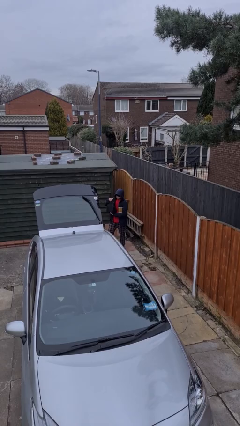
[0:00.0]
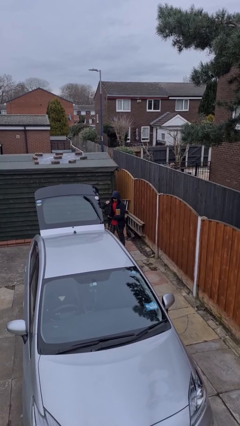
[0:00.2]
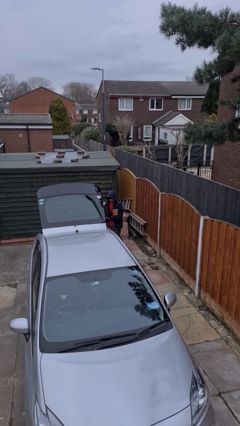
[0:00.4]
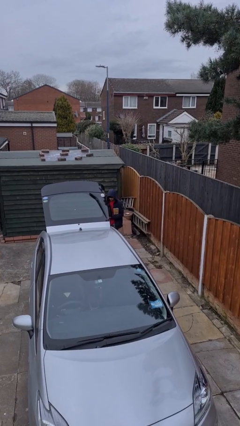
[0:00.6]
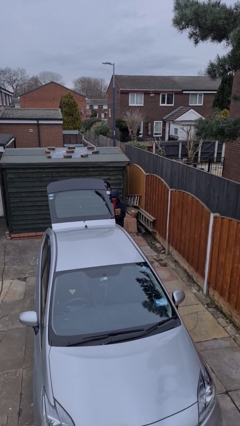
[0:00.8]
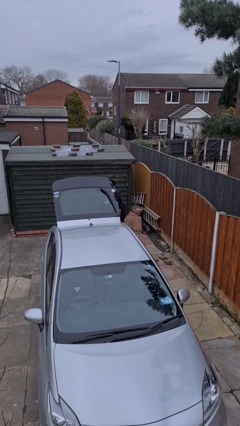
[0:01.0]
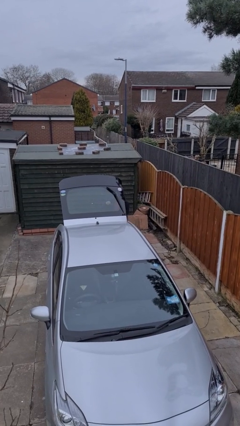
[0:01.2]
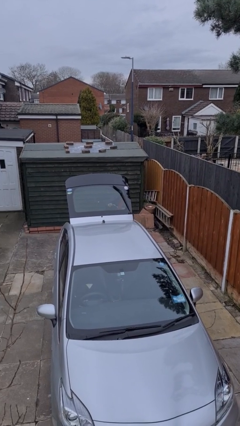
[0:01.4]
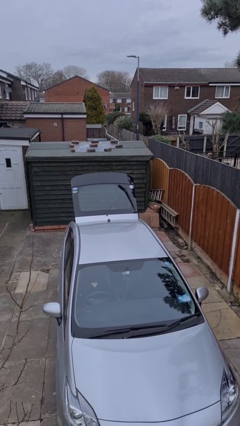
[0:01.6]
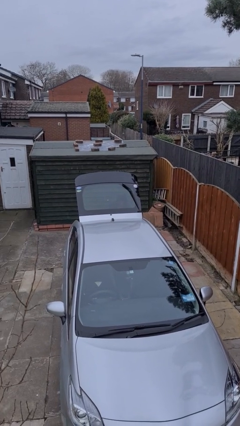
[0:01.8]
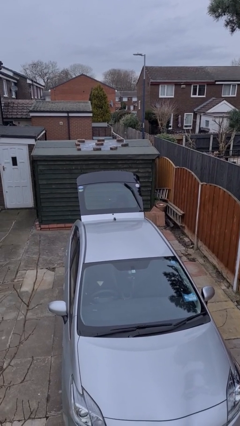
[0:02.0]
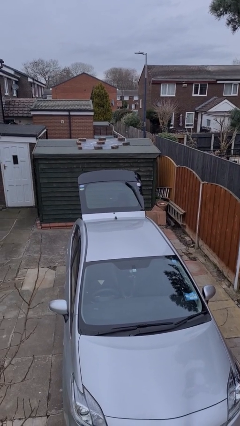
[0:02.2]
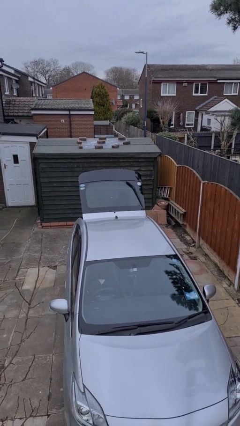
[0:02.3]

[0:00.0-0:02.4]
person loads car

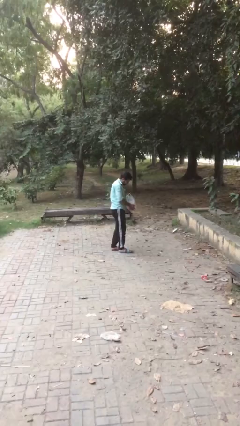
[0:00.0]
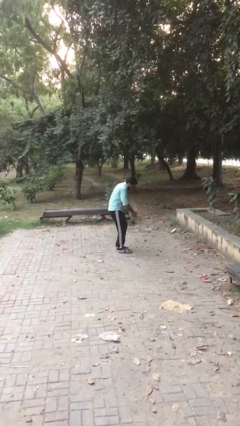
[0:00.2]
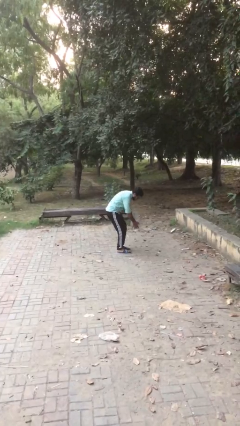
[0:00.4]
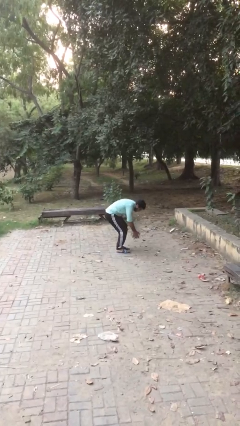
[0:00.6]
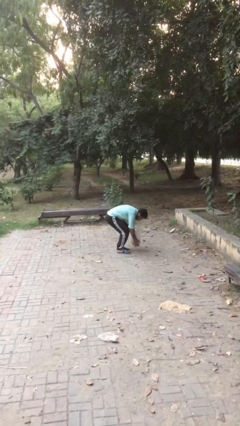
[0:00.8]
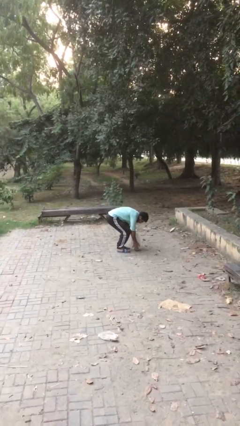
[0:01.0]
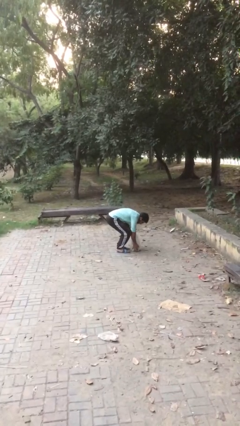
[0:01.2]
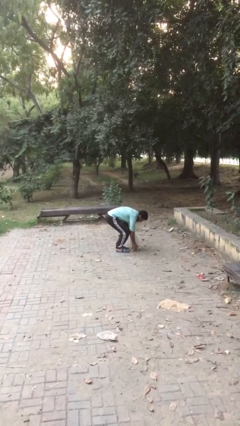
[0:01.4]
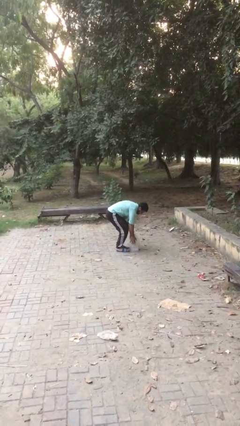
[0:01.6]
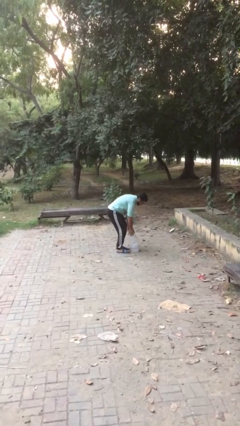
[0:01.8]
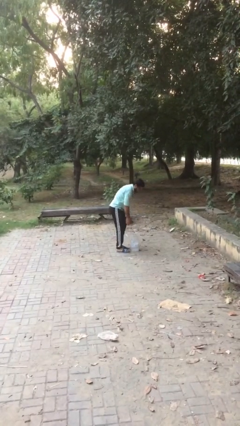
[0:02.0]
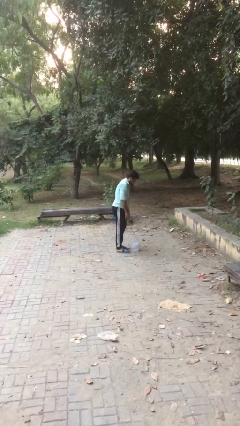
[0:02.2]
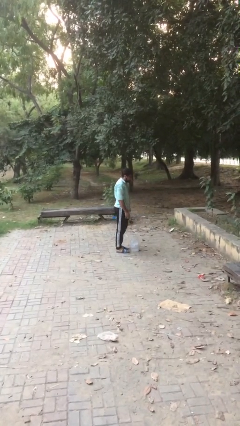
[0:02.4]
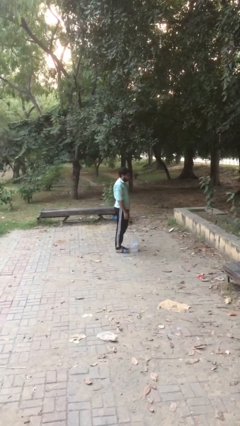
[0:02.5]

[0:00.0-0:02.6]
person puts down object on floor

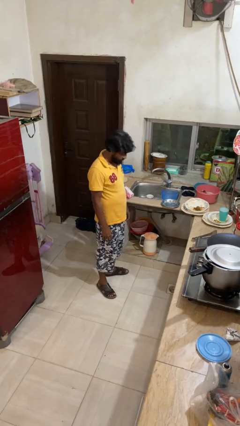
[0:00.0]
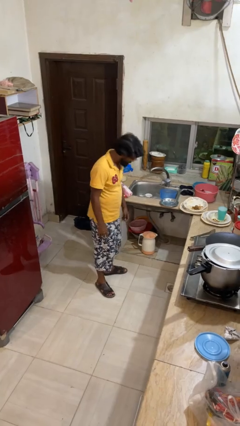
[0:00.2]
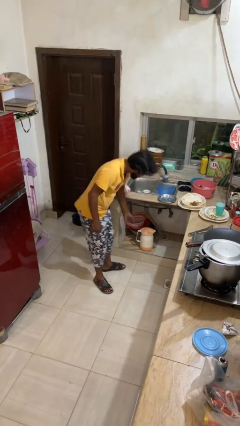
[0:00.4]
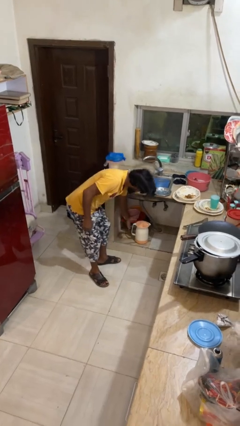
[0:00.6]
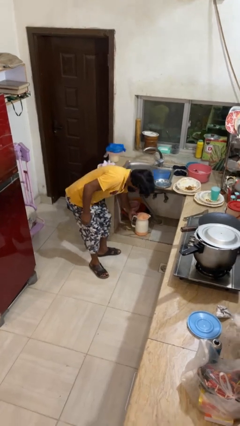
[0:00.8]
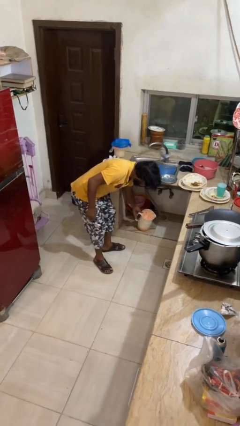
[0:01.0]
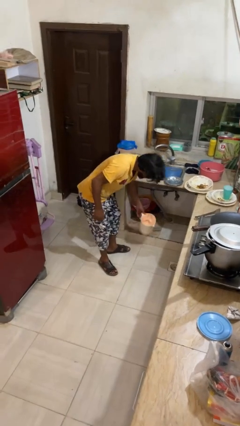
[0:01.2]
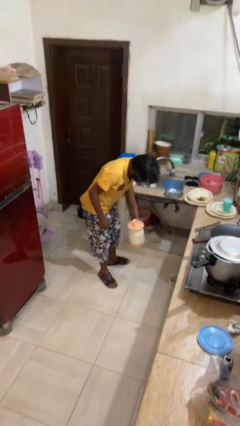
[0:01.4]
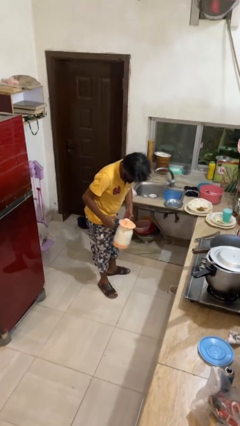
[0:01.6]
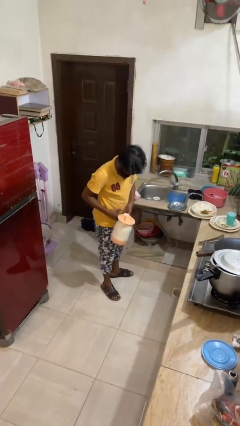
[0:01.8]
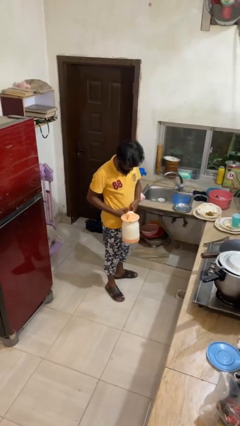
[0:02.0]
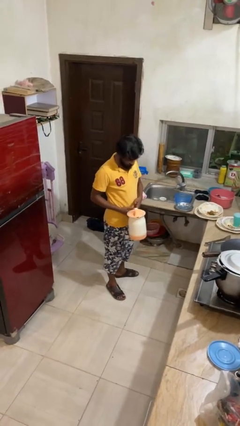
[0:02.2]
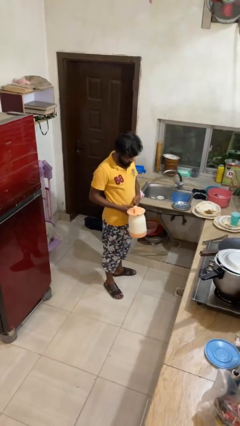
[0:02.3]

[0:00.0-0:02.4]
person picks up object from cabinet

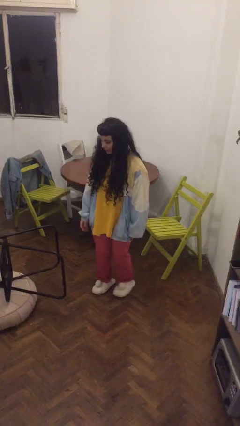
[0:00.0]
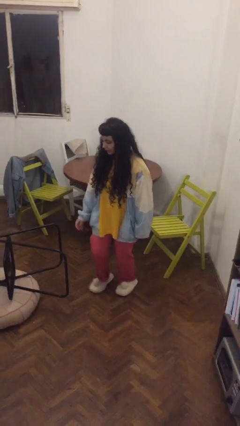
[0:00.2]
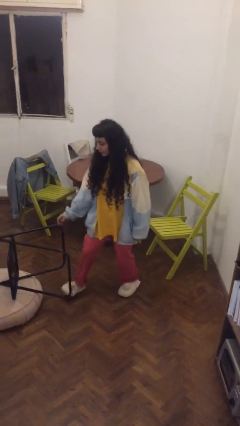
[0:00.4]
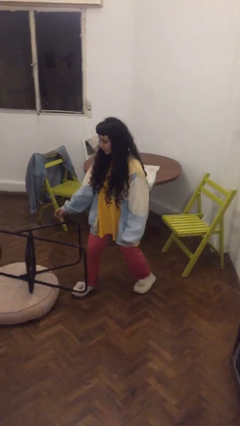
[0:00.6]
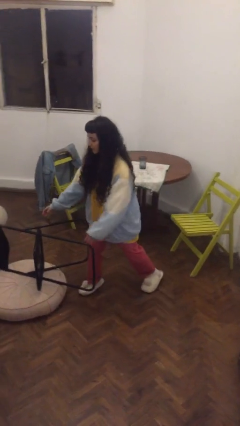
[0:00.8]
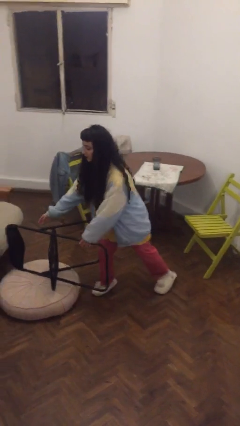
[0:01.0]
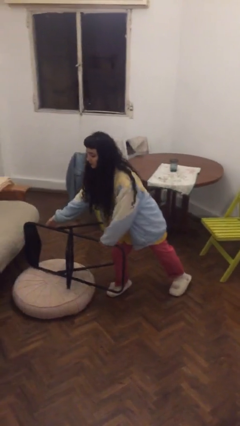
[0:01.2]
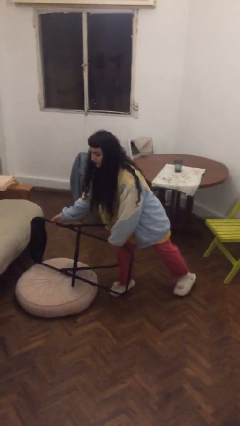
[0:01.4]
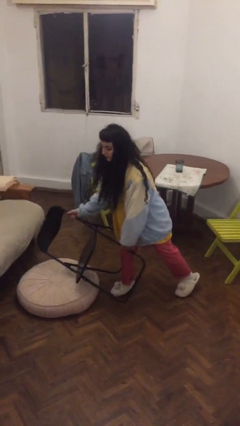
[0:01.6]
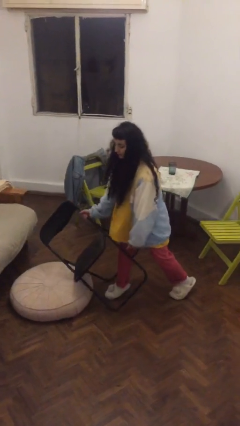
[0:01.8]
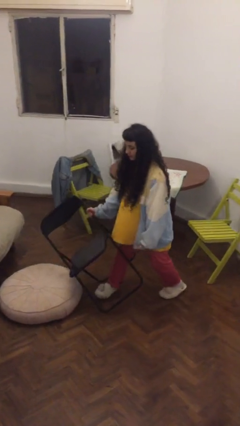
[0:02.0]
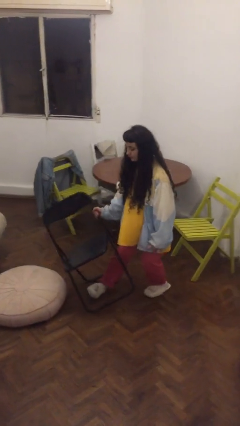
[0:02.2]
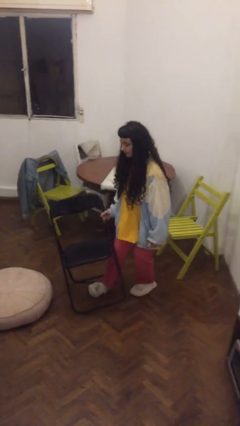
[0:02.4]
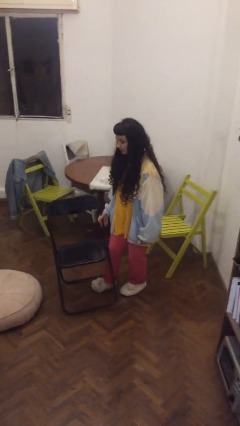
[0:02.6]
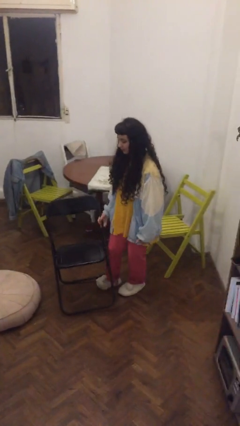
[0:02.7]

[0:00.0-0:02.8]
person sets upright furniture

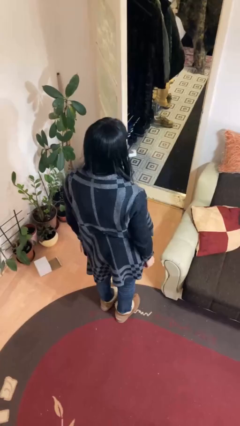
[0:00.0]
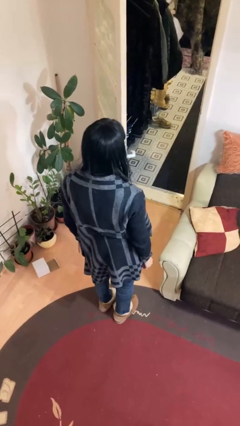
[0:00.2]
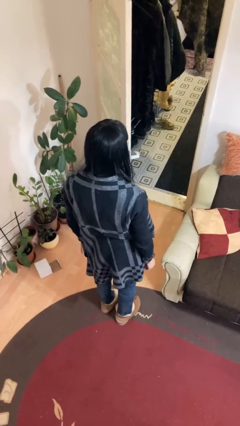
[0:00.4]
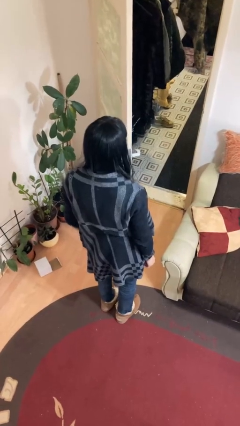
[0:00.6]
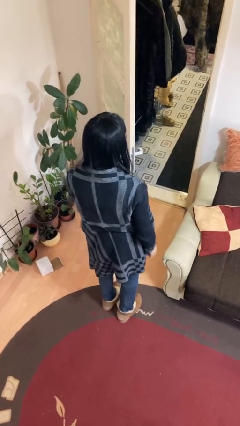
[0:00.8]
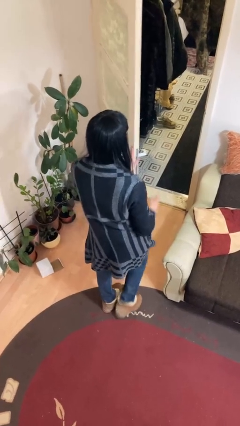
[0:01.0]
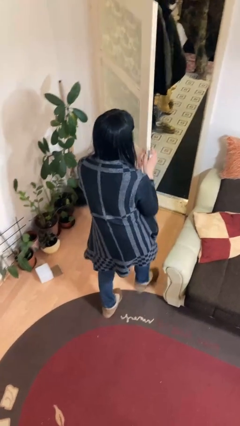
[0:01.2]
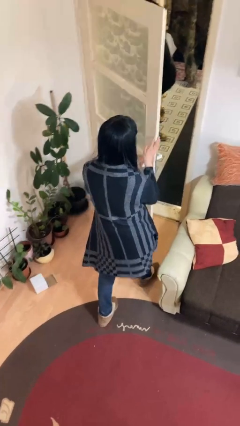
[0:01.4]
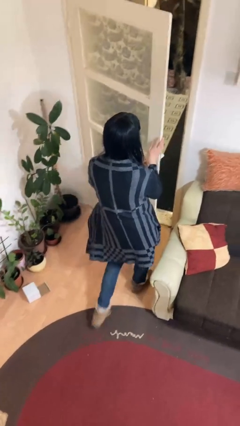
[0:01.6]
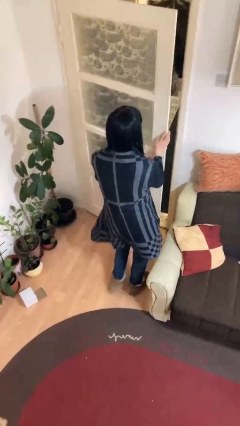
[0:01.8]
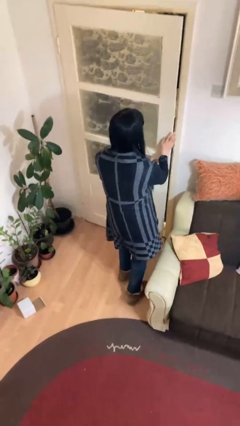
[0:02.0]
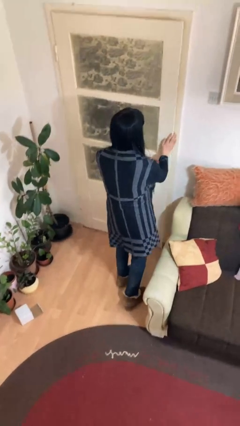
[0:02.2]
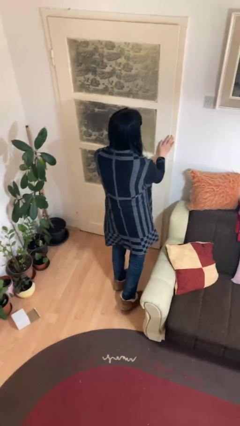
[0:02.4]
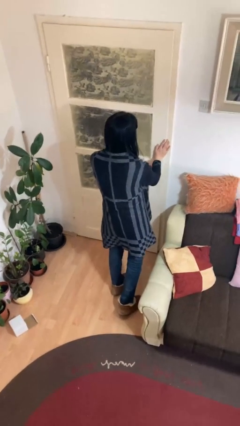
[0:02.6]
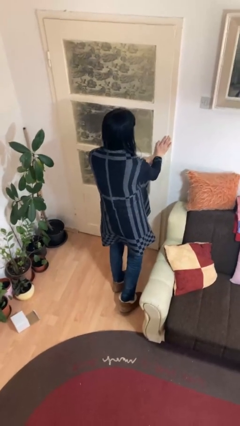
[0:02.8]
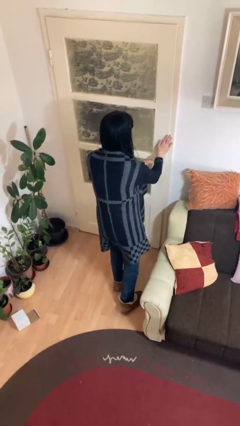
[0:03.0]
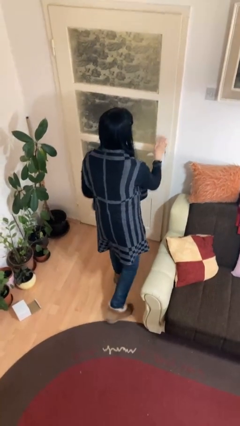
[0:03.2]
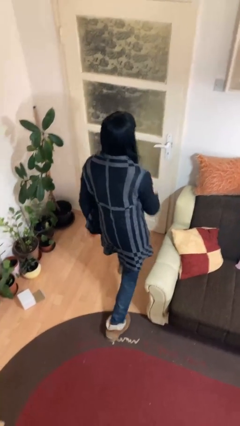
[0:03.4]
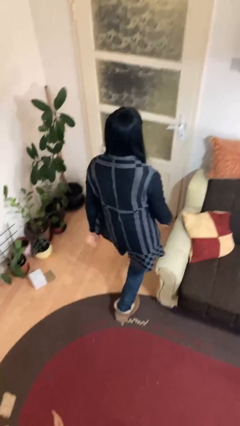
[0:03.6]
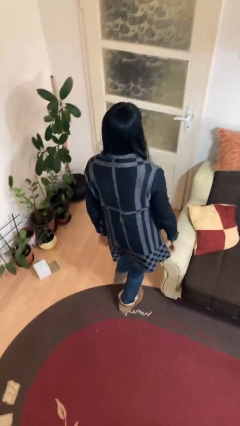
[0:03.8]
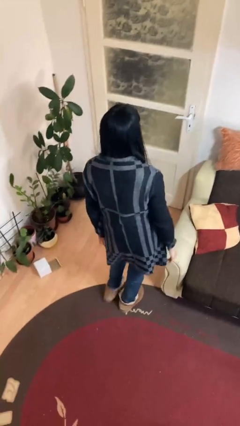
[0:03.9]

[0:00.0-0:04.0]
person closes facility door

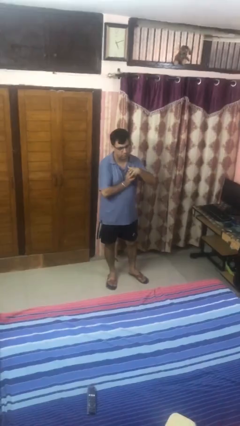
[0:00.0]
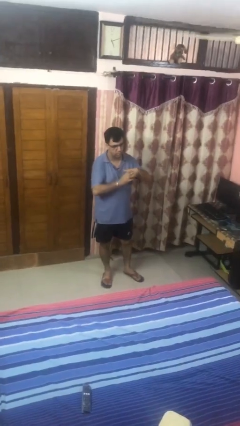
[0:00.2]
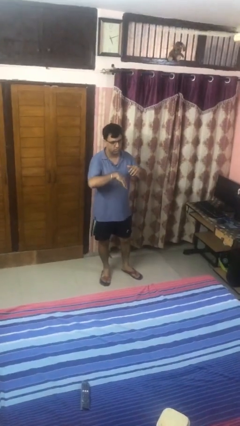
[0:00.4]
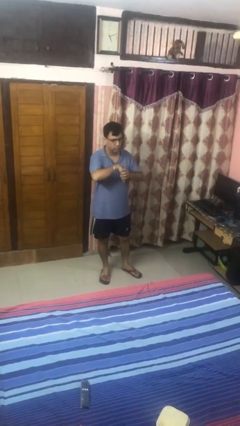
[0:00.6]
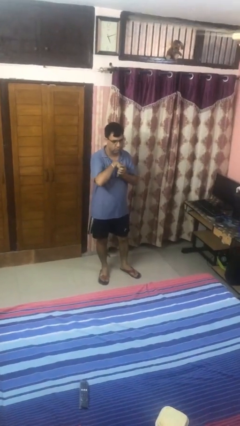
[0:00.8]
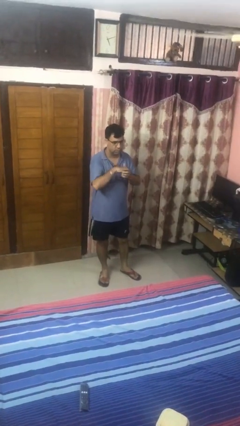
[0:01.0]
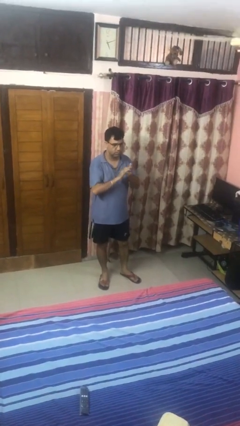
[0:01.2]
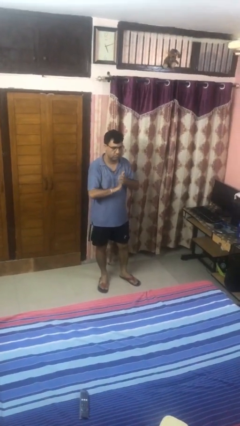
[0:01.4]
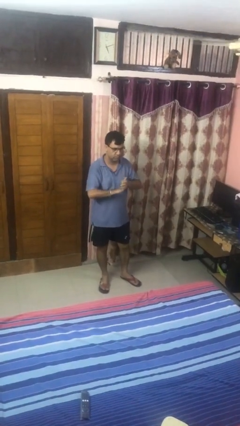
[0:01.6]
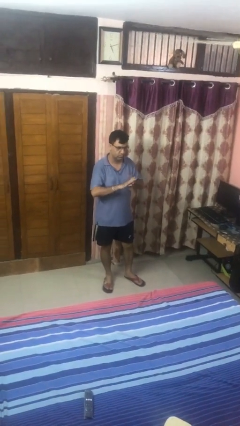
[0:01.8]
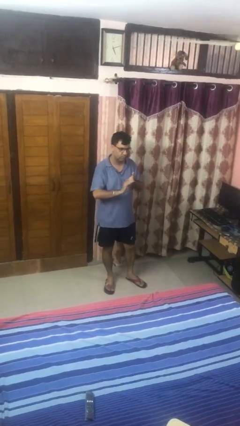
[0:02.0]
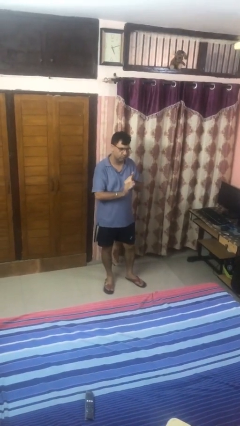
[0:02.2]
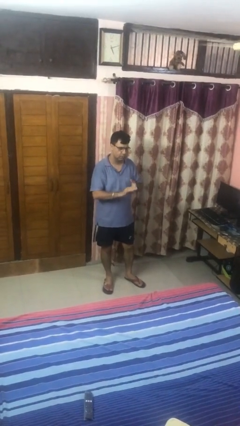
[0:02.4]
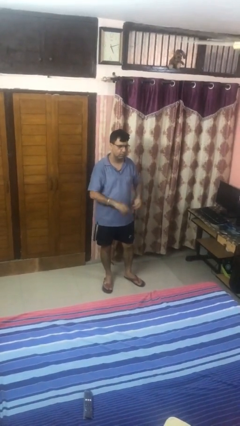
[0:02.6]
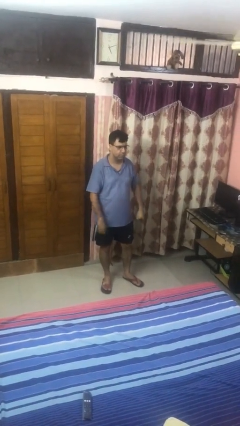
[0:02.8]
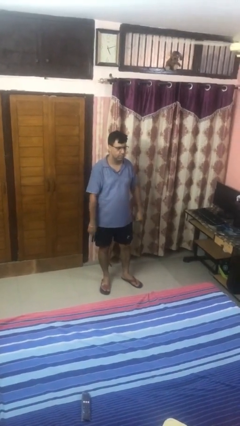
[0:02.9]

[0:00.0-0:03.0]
person cracks knuckles

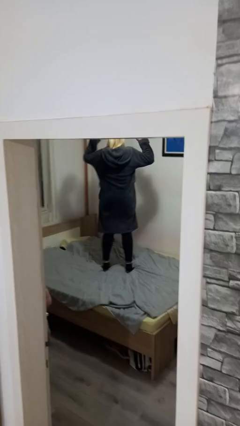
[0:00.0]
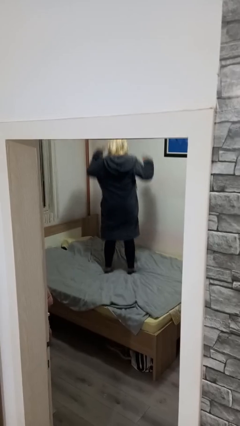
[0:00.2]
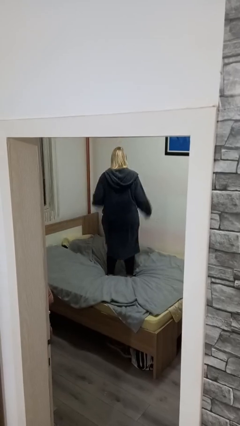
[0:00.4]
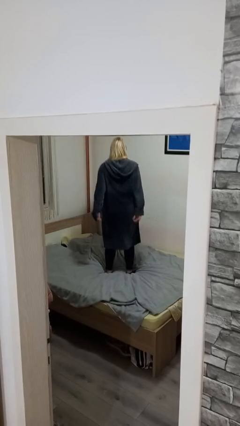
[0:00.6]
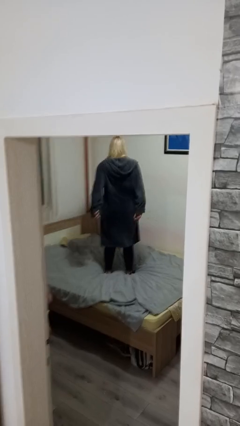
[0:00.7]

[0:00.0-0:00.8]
person jumps on bed
